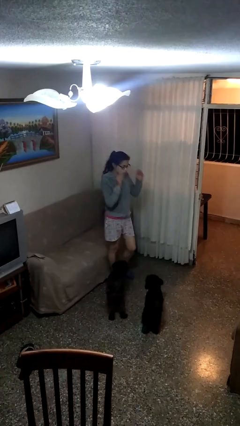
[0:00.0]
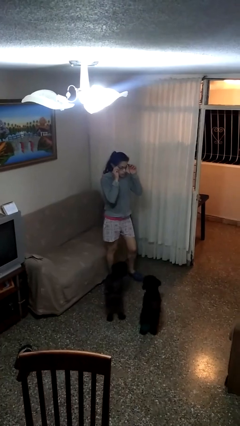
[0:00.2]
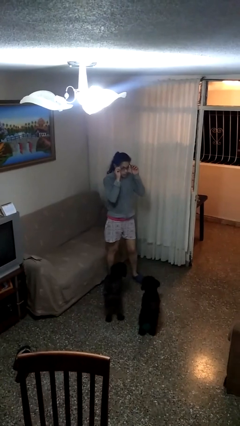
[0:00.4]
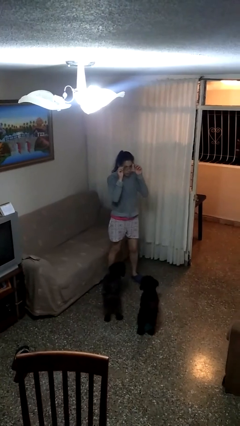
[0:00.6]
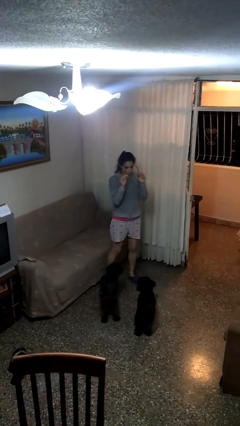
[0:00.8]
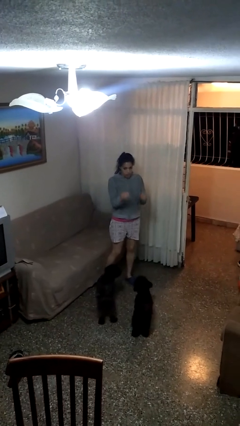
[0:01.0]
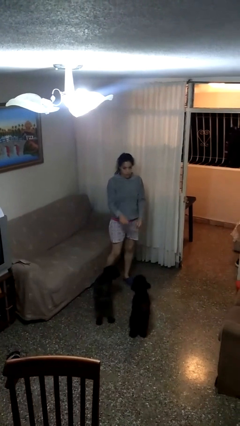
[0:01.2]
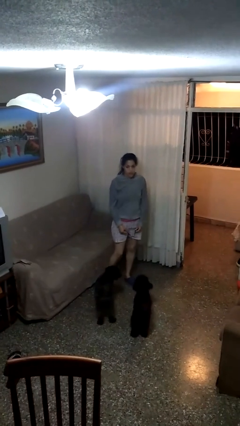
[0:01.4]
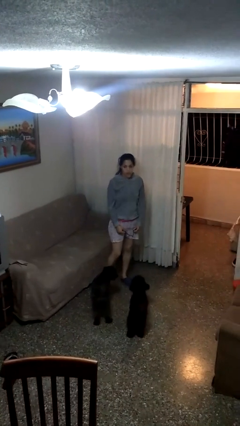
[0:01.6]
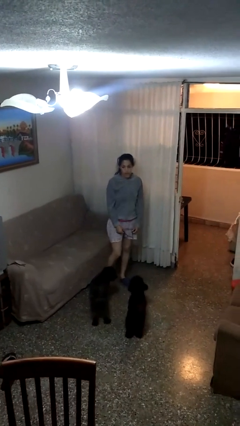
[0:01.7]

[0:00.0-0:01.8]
person takes off glasses

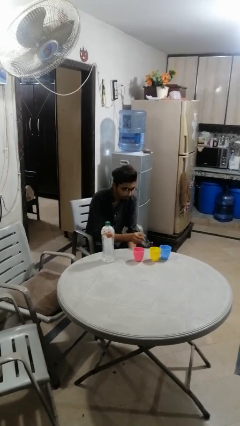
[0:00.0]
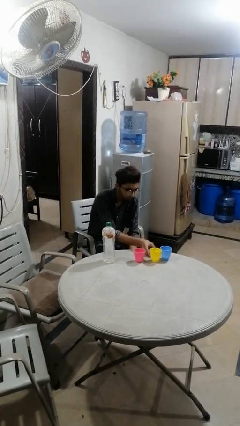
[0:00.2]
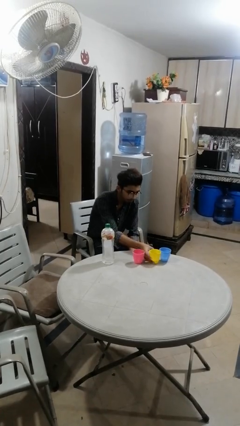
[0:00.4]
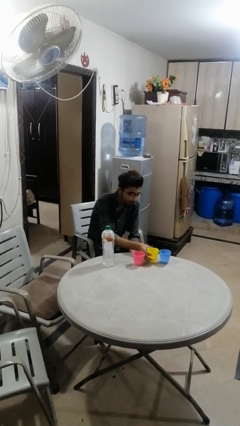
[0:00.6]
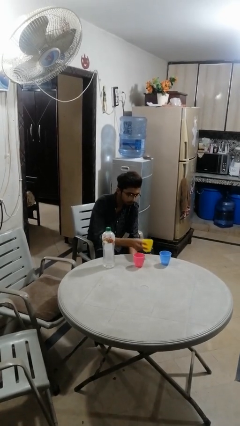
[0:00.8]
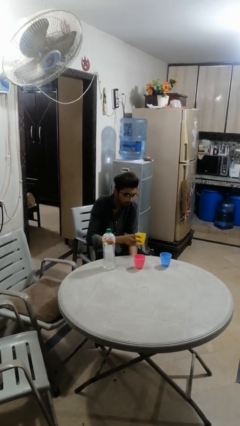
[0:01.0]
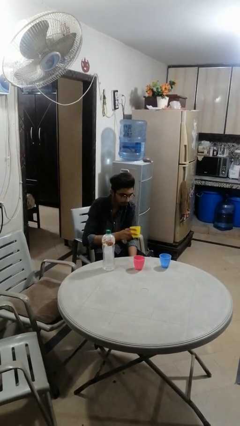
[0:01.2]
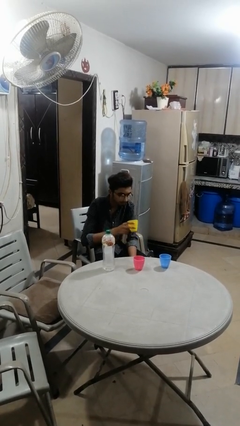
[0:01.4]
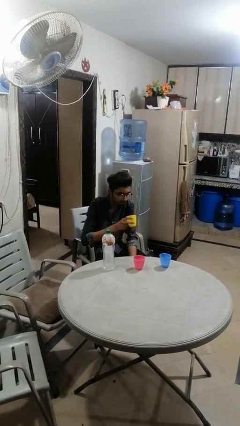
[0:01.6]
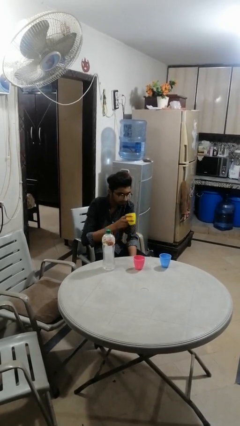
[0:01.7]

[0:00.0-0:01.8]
person picks up object from table

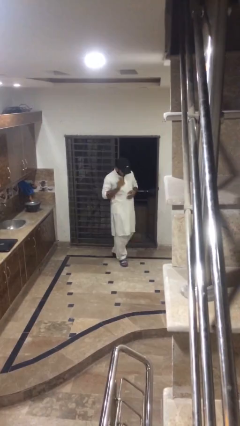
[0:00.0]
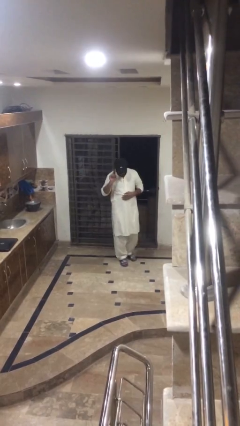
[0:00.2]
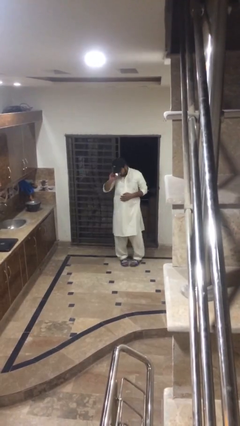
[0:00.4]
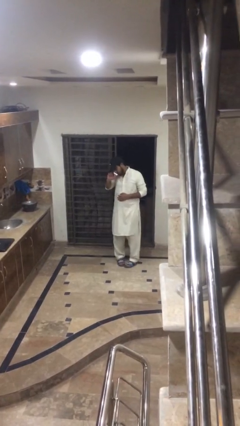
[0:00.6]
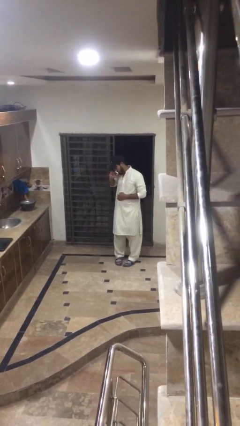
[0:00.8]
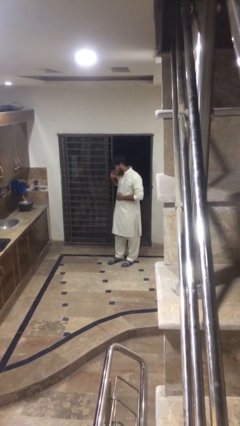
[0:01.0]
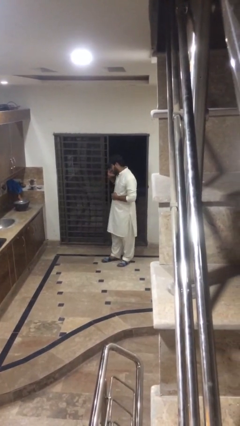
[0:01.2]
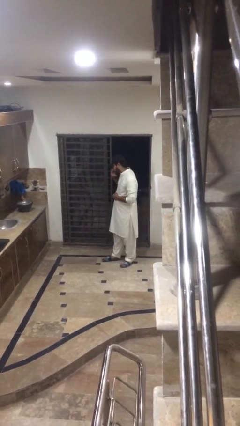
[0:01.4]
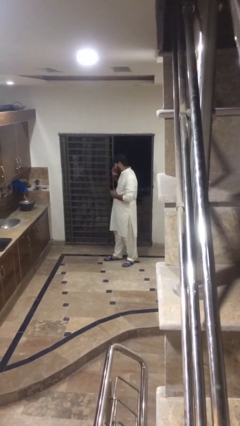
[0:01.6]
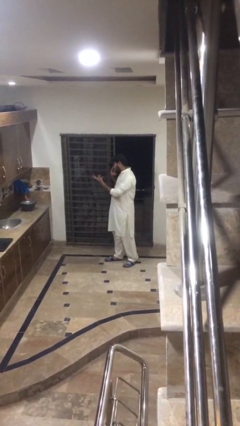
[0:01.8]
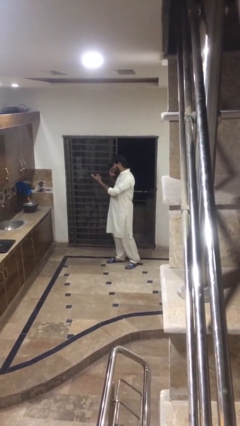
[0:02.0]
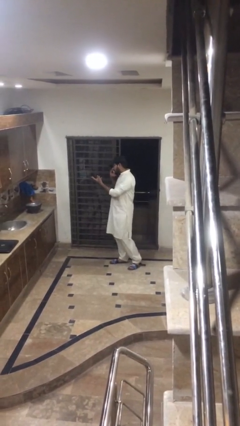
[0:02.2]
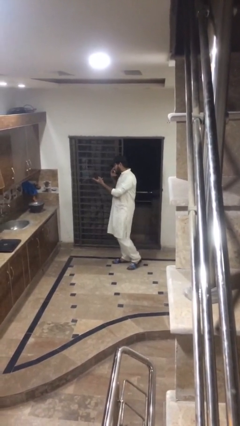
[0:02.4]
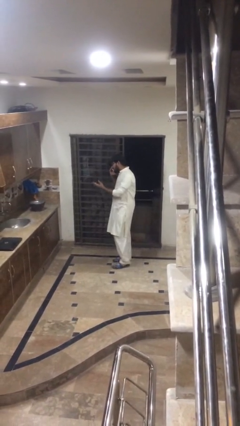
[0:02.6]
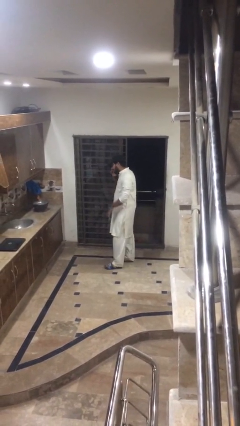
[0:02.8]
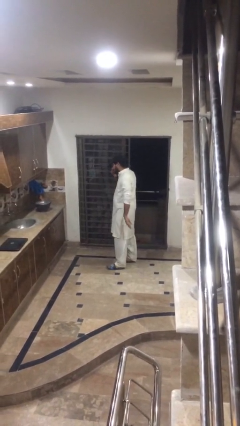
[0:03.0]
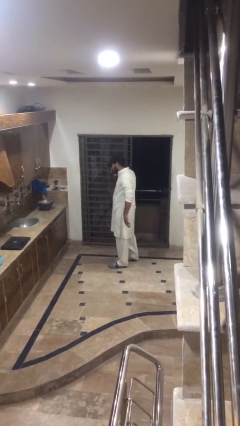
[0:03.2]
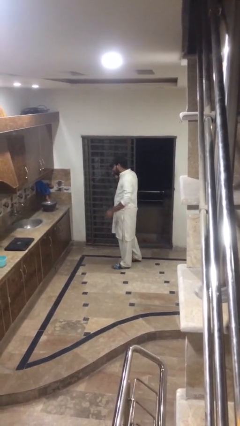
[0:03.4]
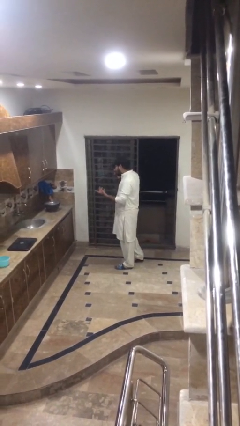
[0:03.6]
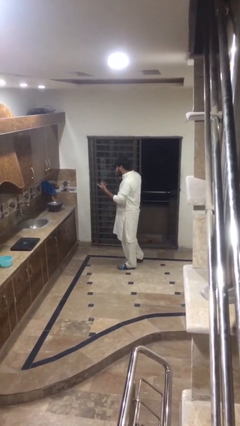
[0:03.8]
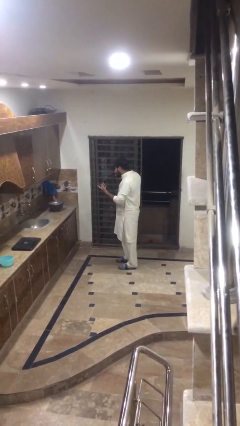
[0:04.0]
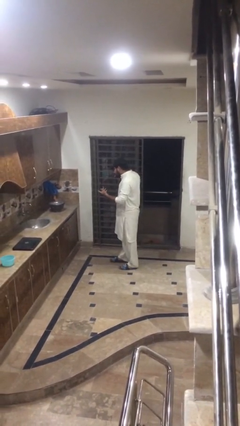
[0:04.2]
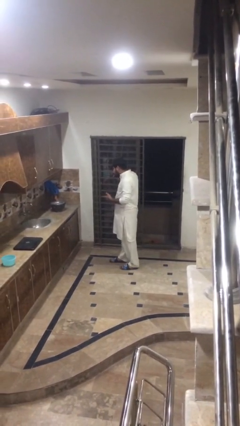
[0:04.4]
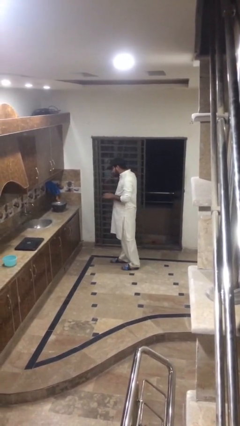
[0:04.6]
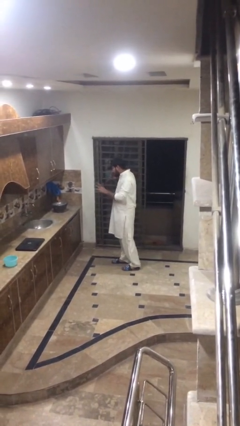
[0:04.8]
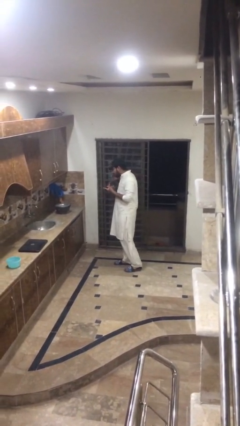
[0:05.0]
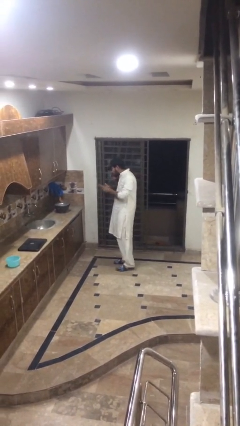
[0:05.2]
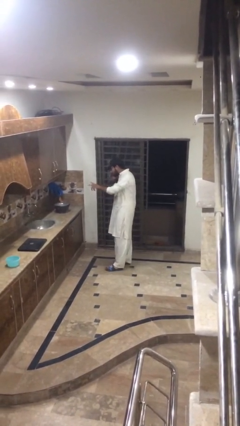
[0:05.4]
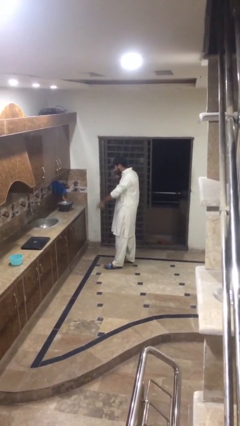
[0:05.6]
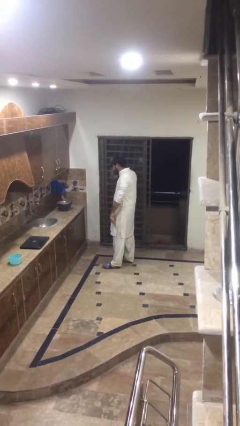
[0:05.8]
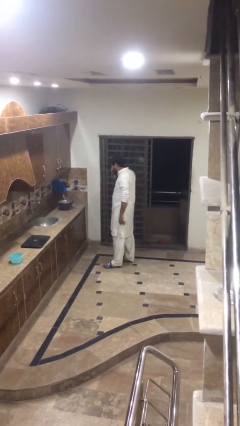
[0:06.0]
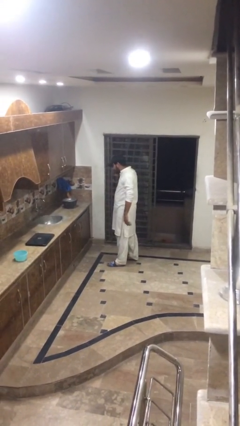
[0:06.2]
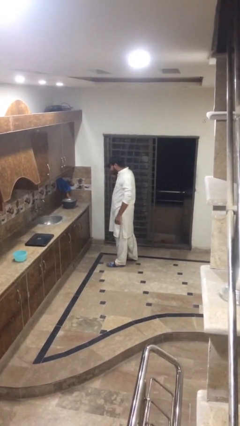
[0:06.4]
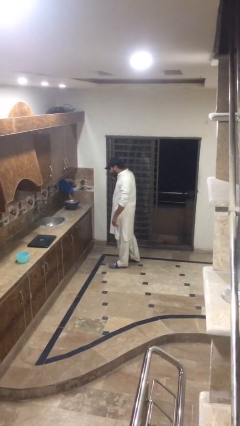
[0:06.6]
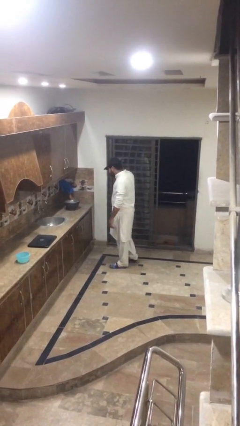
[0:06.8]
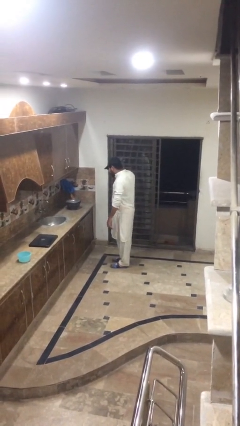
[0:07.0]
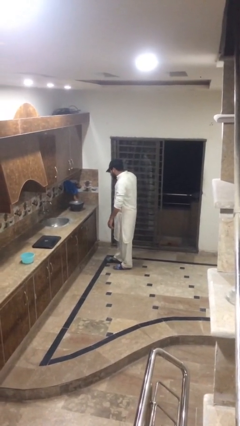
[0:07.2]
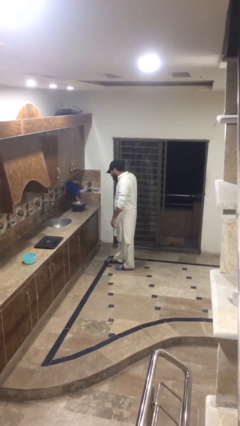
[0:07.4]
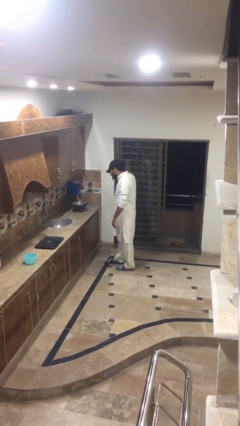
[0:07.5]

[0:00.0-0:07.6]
person talks on phone

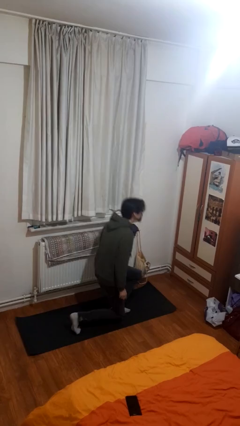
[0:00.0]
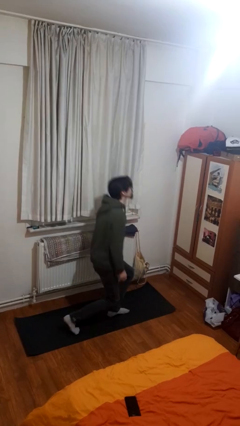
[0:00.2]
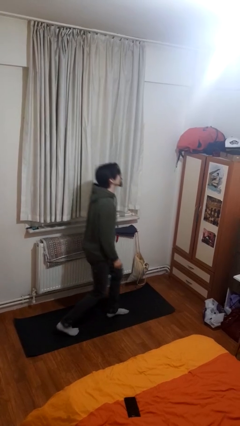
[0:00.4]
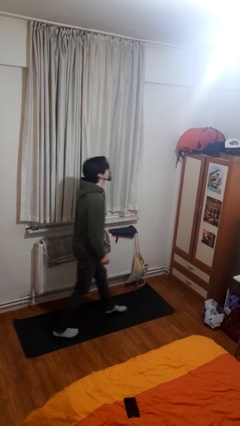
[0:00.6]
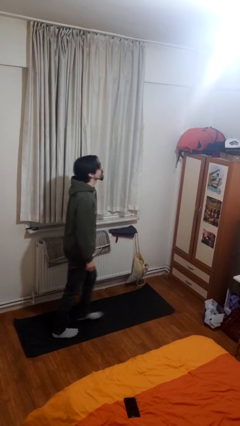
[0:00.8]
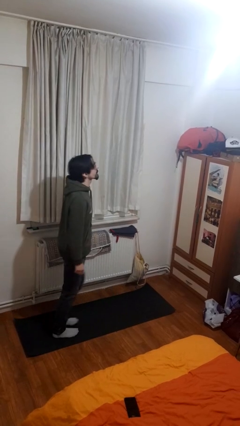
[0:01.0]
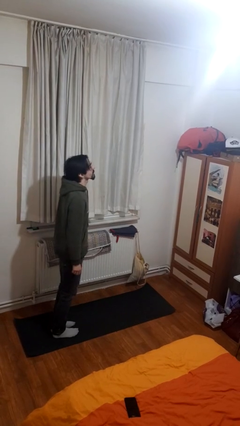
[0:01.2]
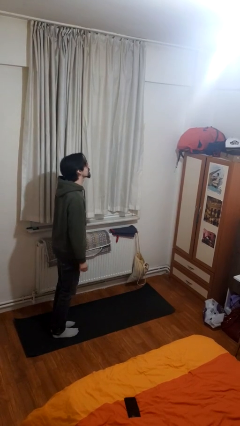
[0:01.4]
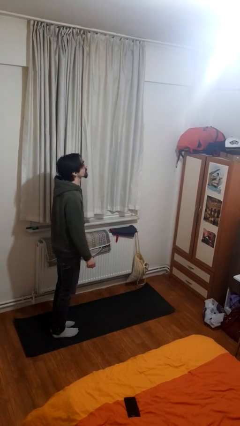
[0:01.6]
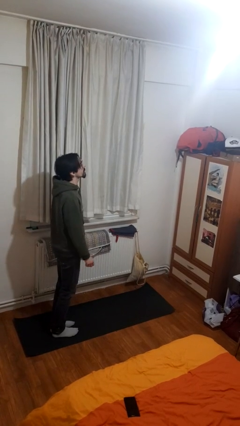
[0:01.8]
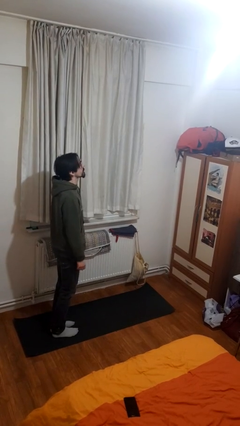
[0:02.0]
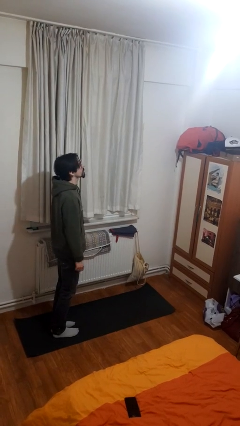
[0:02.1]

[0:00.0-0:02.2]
person stands up from floor

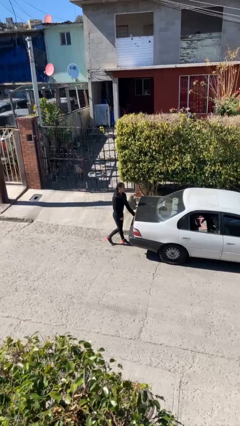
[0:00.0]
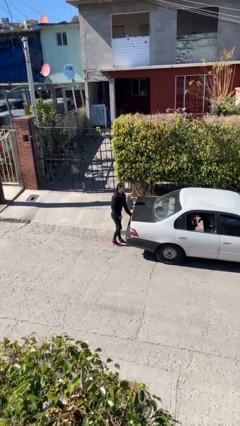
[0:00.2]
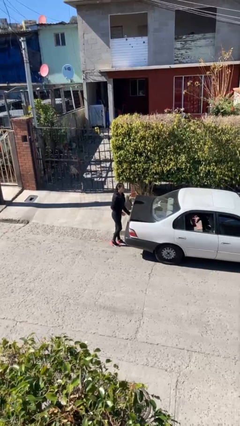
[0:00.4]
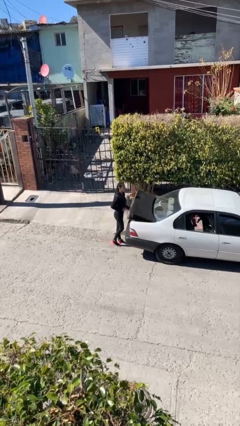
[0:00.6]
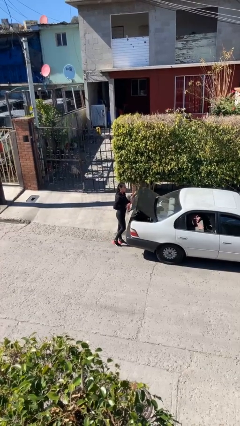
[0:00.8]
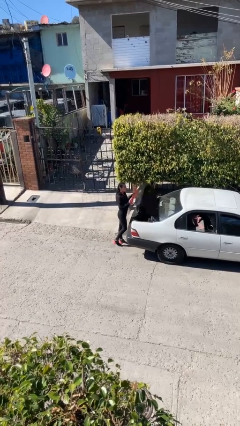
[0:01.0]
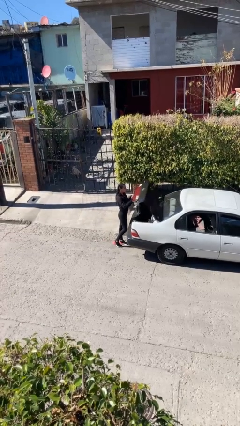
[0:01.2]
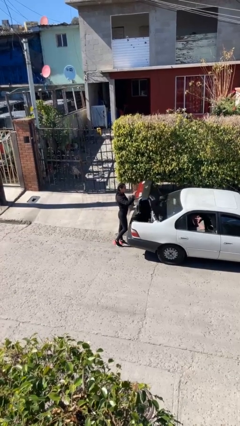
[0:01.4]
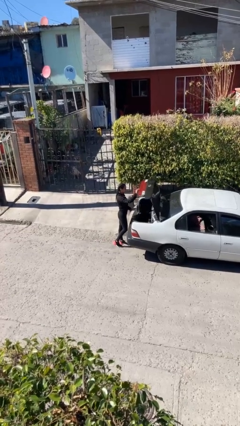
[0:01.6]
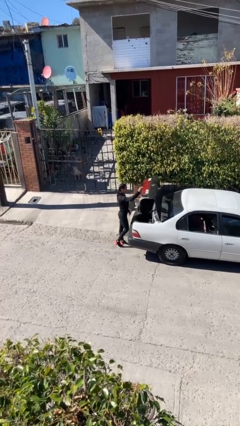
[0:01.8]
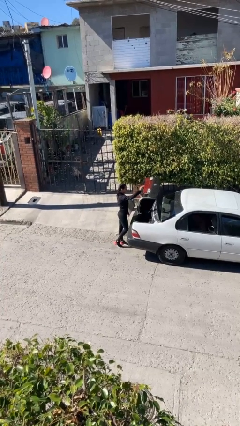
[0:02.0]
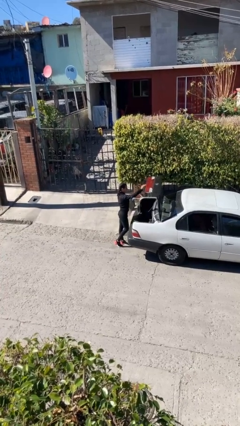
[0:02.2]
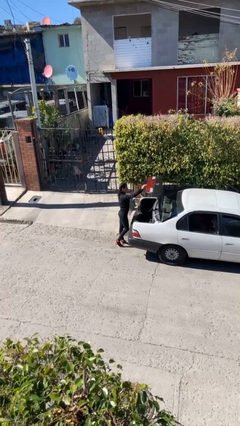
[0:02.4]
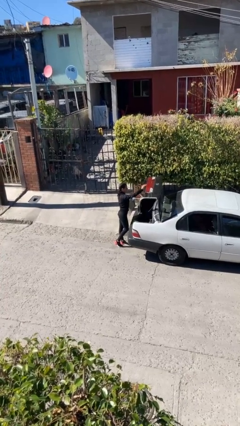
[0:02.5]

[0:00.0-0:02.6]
person opens car trunk

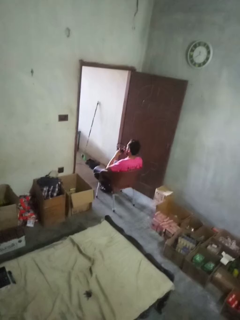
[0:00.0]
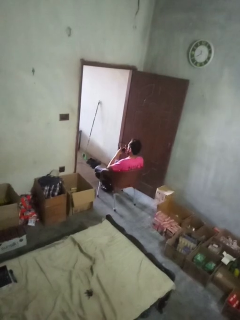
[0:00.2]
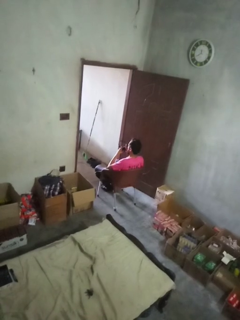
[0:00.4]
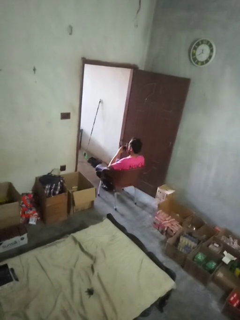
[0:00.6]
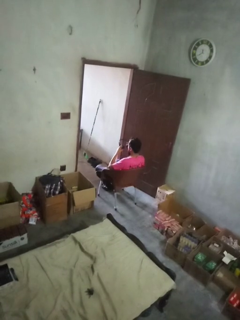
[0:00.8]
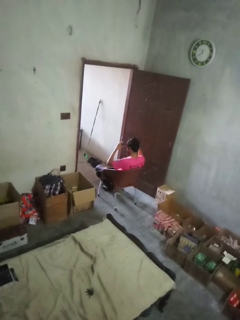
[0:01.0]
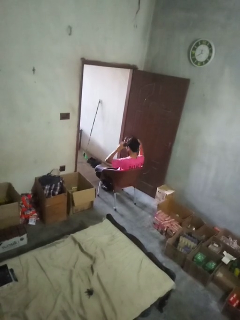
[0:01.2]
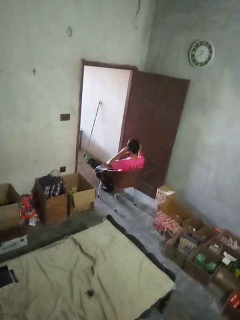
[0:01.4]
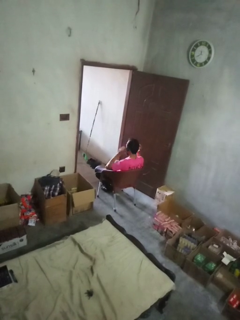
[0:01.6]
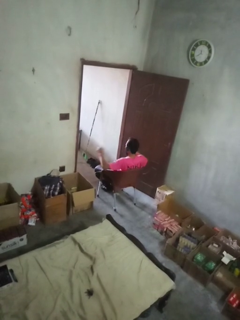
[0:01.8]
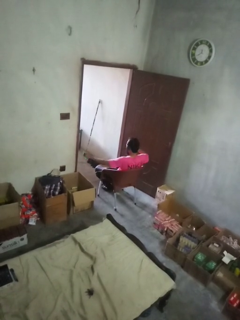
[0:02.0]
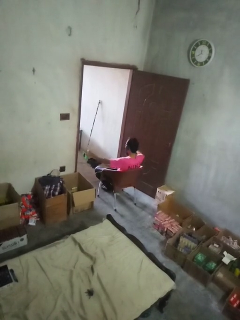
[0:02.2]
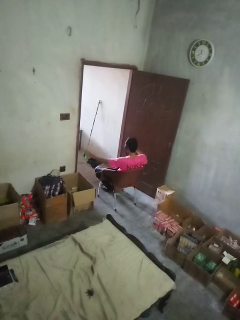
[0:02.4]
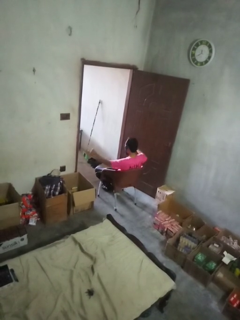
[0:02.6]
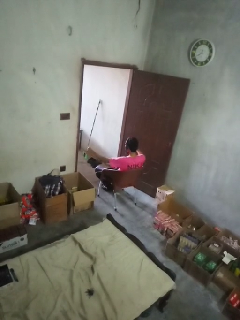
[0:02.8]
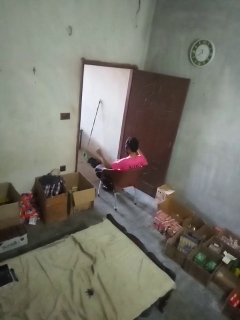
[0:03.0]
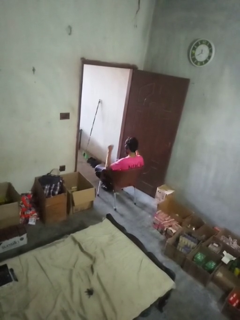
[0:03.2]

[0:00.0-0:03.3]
person puts on headphones
